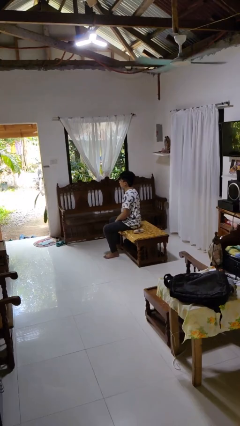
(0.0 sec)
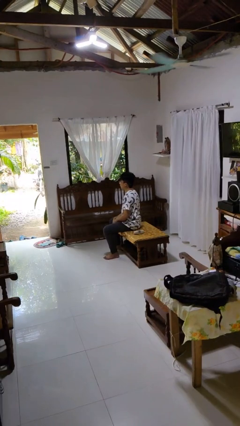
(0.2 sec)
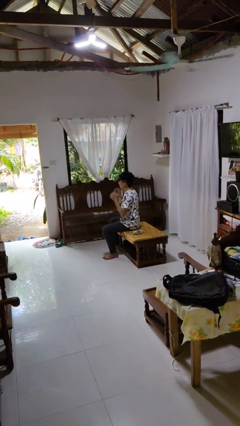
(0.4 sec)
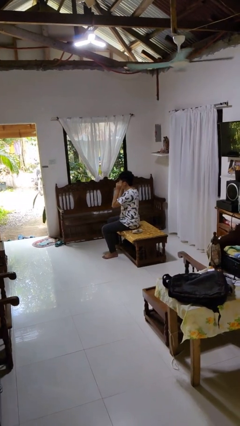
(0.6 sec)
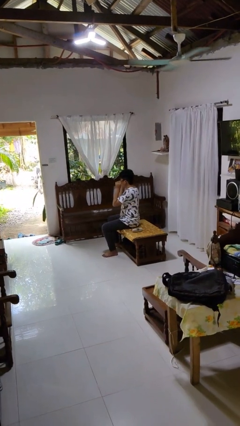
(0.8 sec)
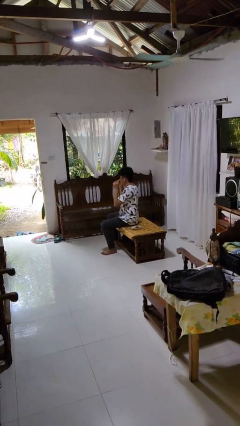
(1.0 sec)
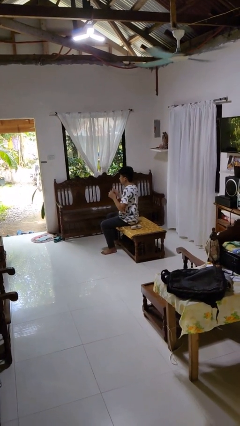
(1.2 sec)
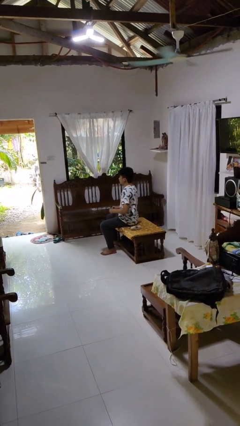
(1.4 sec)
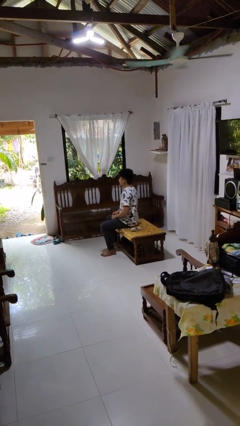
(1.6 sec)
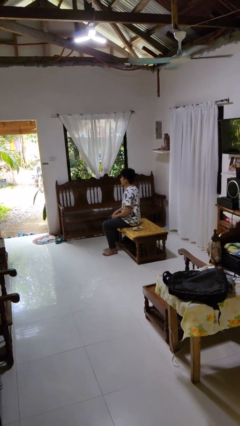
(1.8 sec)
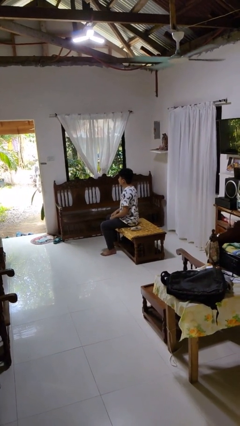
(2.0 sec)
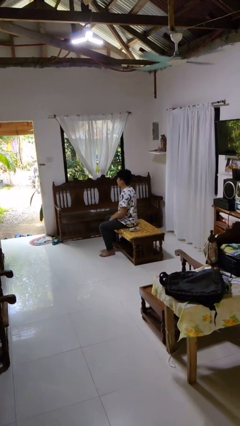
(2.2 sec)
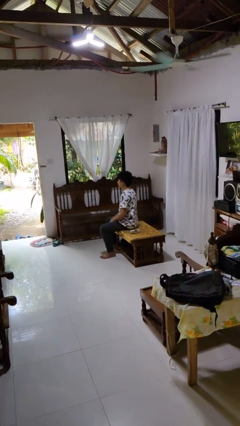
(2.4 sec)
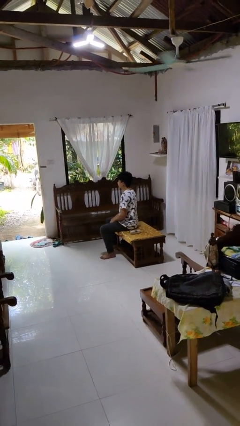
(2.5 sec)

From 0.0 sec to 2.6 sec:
person takes off glasses

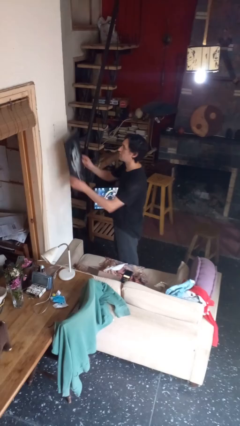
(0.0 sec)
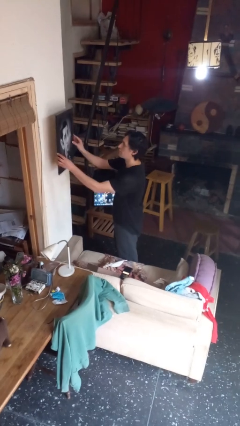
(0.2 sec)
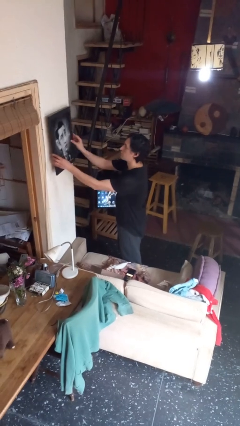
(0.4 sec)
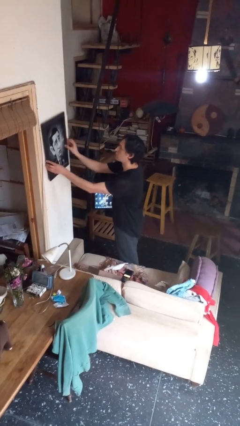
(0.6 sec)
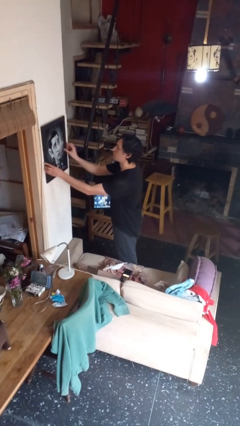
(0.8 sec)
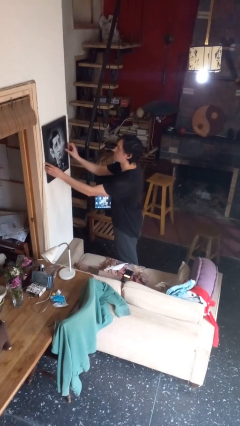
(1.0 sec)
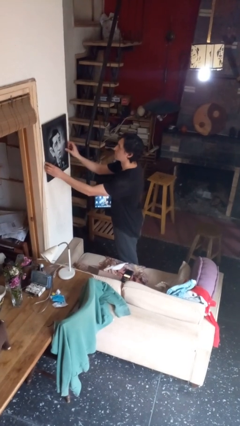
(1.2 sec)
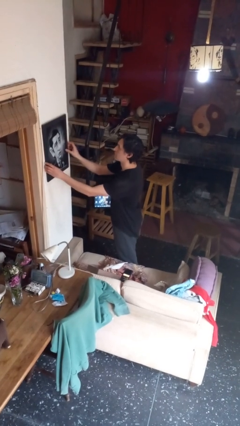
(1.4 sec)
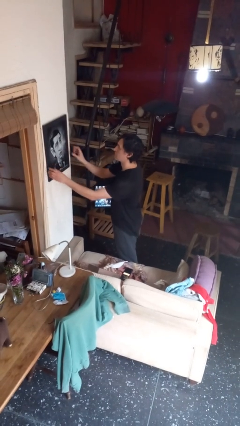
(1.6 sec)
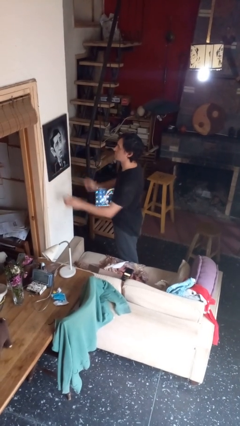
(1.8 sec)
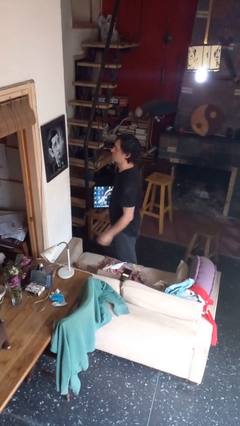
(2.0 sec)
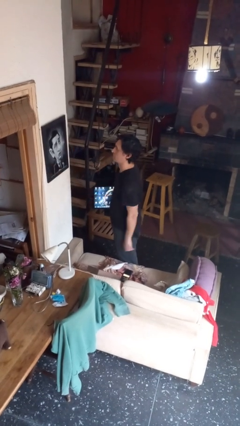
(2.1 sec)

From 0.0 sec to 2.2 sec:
person puts up picture frame

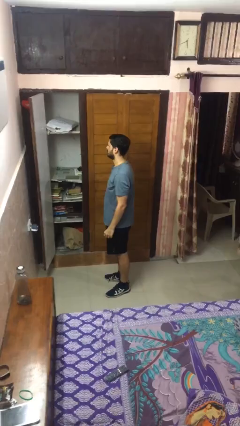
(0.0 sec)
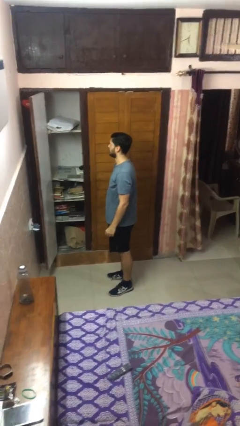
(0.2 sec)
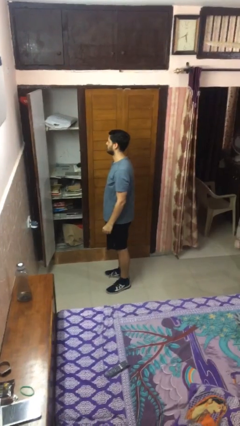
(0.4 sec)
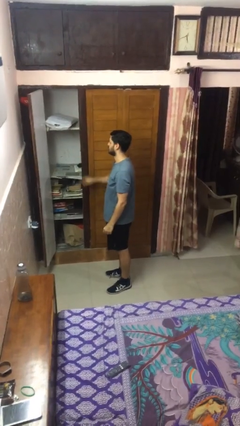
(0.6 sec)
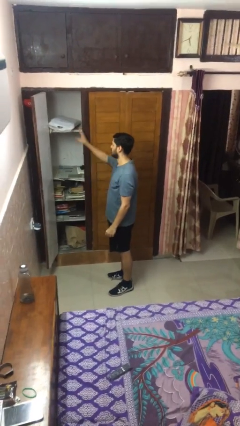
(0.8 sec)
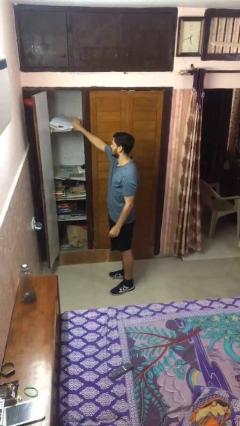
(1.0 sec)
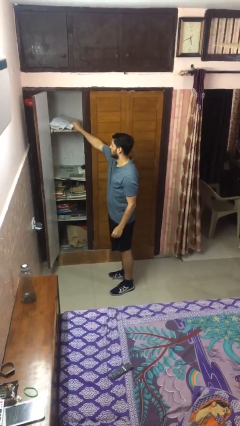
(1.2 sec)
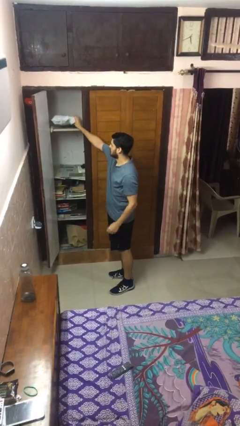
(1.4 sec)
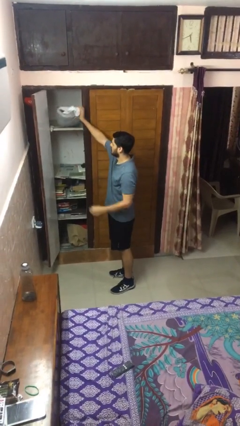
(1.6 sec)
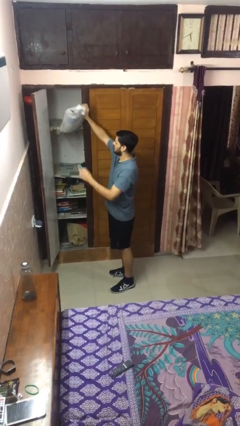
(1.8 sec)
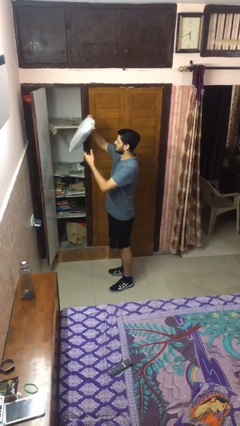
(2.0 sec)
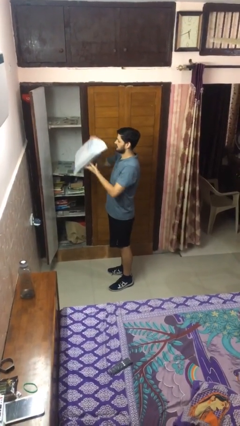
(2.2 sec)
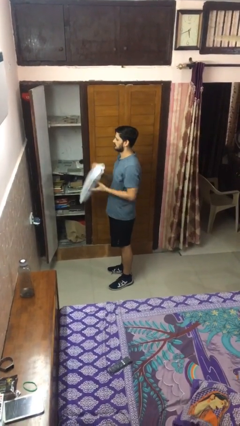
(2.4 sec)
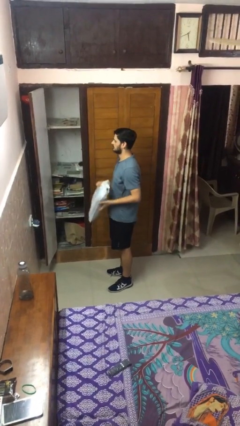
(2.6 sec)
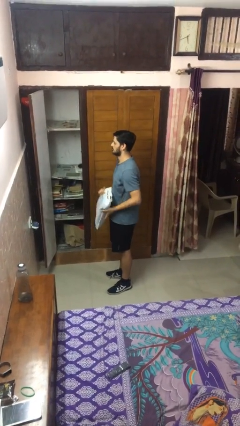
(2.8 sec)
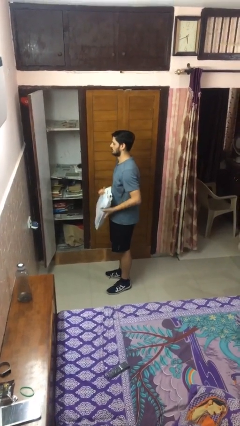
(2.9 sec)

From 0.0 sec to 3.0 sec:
person picks up object from shelf

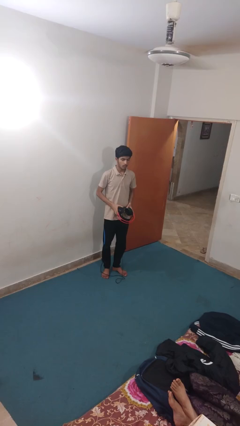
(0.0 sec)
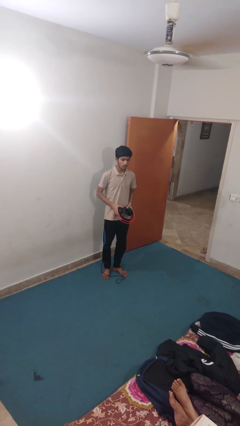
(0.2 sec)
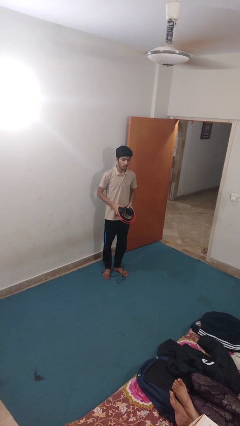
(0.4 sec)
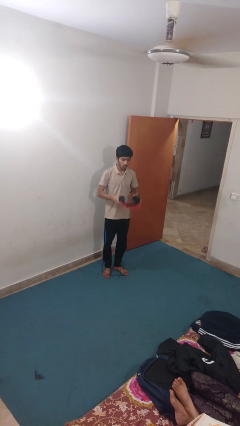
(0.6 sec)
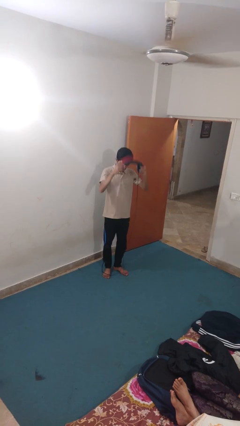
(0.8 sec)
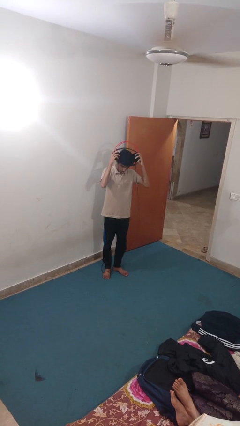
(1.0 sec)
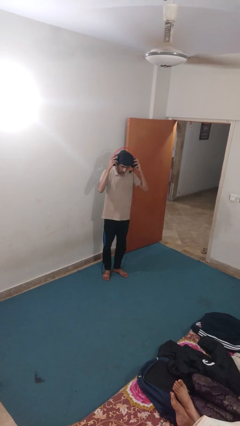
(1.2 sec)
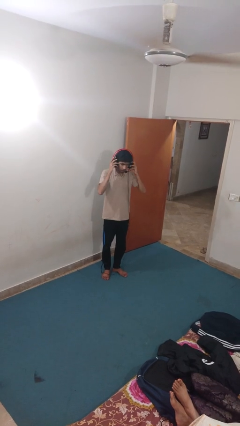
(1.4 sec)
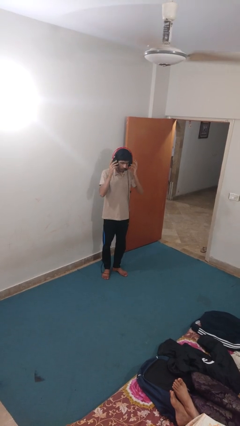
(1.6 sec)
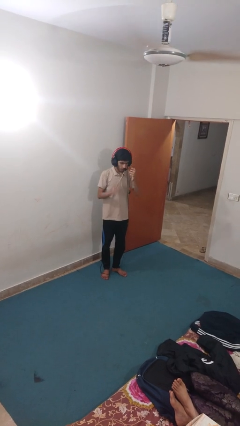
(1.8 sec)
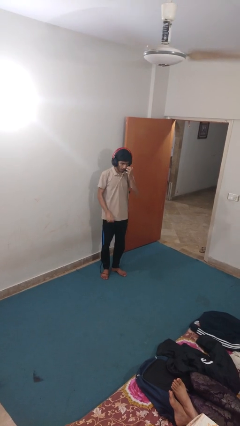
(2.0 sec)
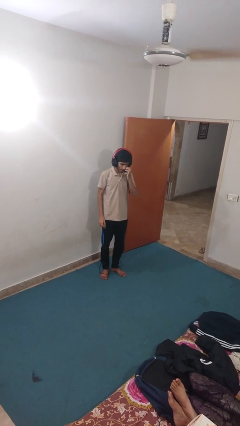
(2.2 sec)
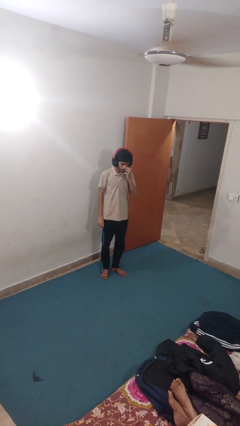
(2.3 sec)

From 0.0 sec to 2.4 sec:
person puts on headphones

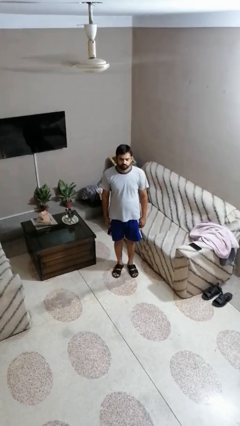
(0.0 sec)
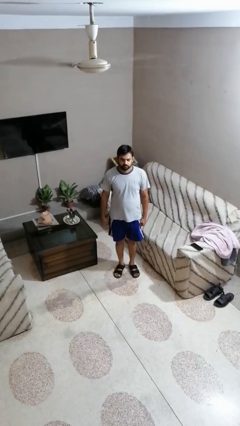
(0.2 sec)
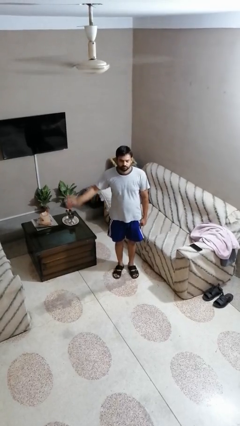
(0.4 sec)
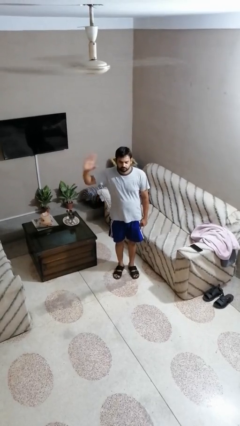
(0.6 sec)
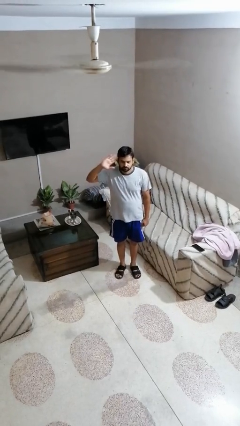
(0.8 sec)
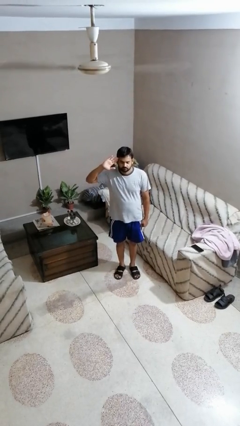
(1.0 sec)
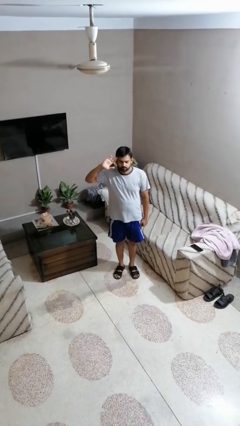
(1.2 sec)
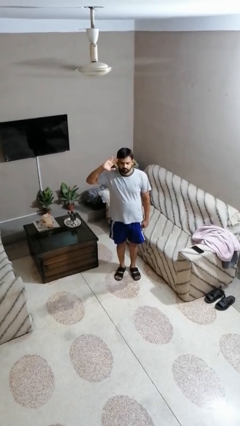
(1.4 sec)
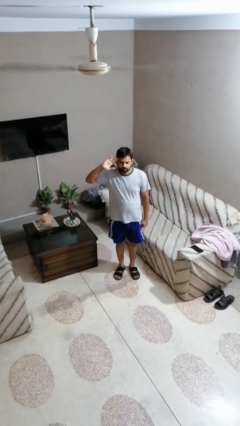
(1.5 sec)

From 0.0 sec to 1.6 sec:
person salutes

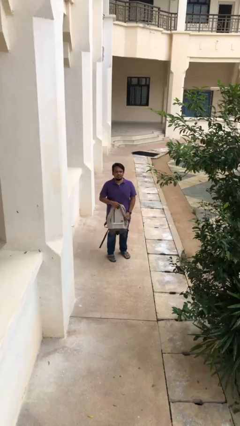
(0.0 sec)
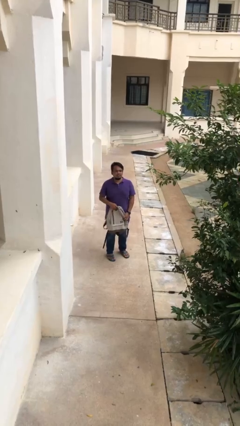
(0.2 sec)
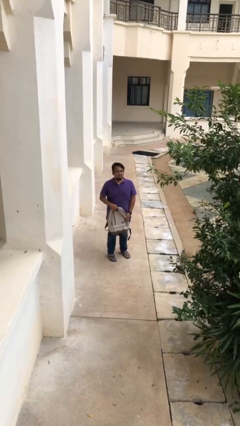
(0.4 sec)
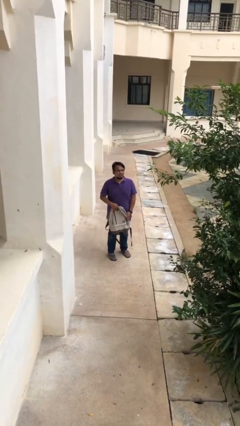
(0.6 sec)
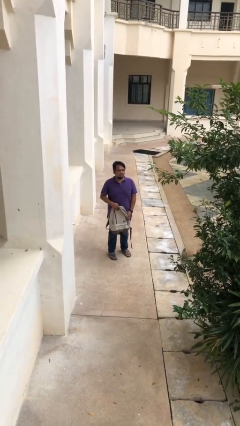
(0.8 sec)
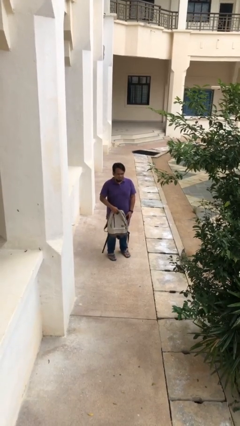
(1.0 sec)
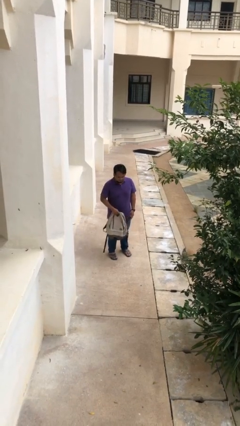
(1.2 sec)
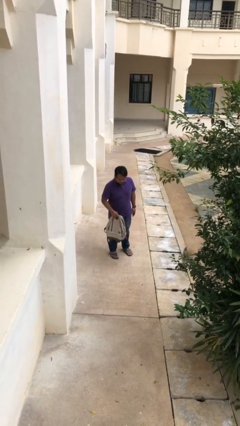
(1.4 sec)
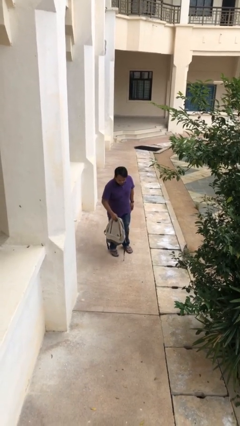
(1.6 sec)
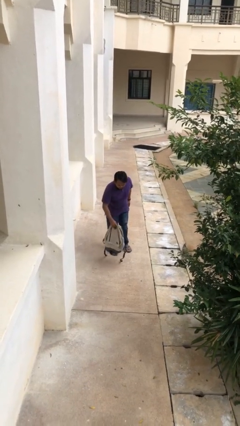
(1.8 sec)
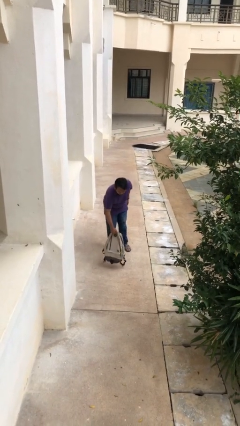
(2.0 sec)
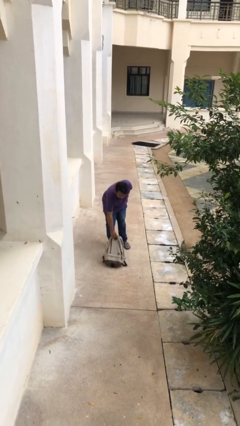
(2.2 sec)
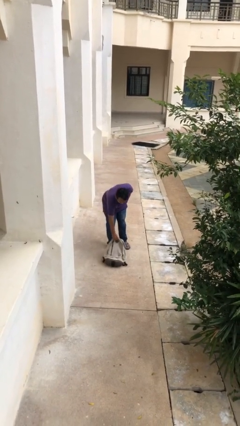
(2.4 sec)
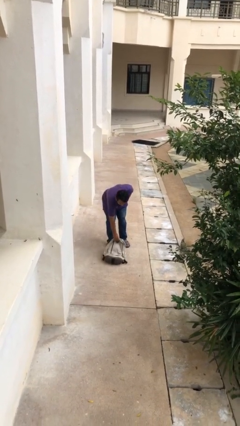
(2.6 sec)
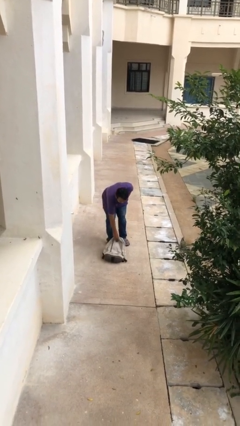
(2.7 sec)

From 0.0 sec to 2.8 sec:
person puts down object on floor

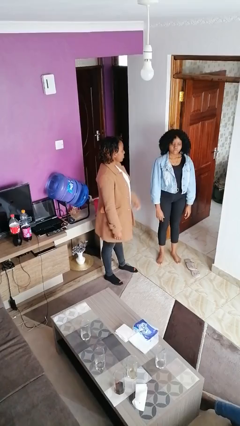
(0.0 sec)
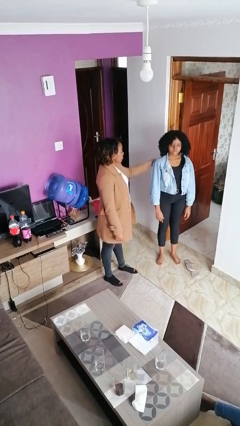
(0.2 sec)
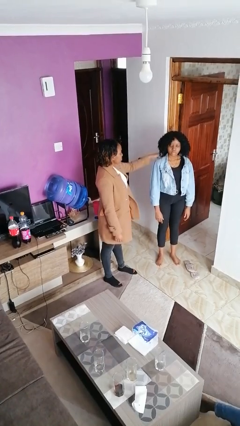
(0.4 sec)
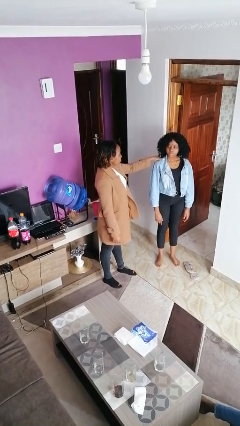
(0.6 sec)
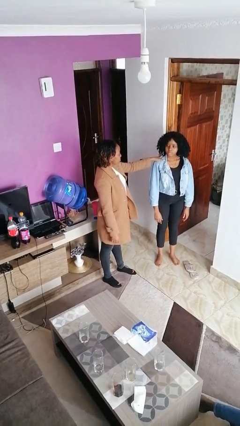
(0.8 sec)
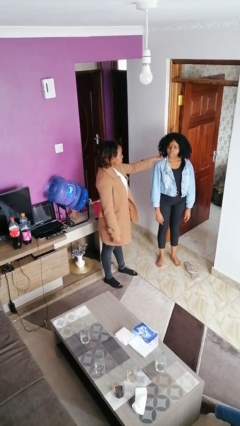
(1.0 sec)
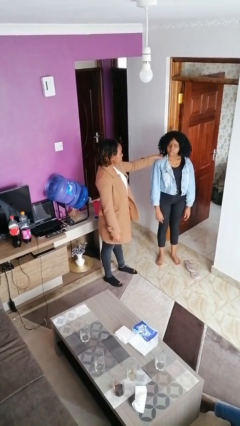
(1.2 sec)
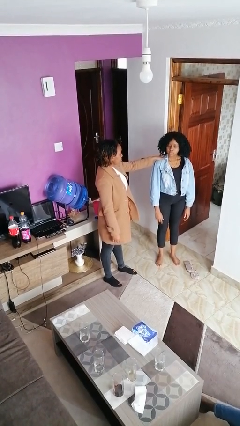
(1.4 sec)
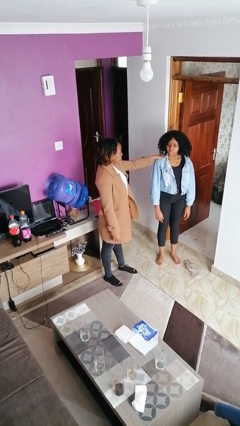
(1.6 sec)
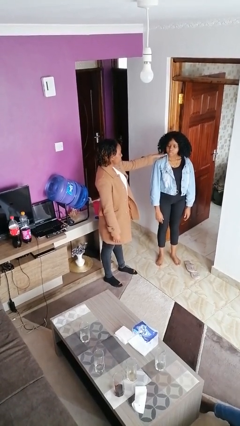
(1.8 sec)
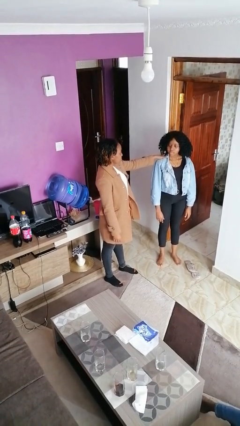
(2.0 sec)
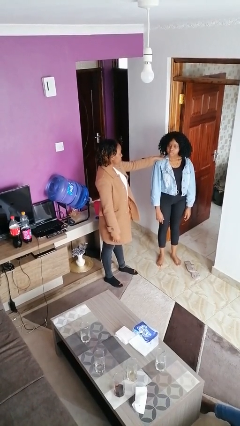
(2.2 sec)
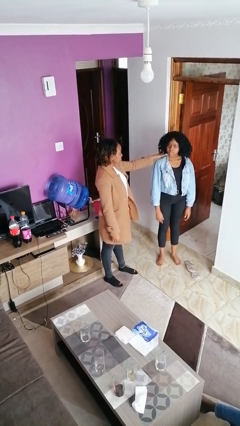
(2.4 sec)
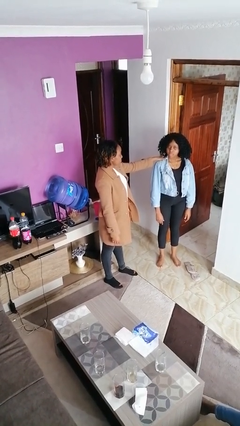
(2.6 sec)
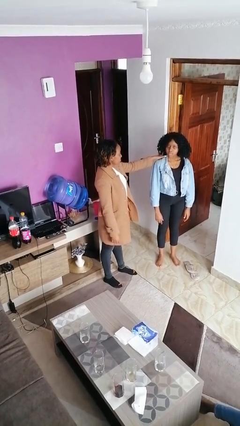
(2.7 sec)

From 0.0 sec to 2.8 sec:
person pounds shoulders of person
